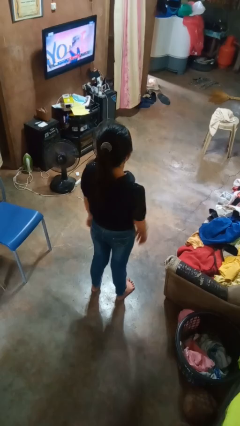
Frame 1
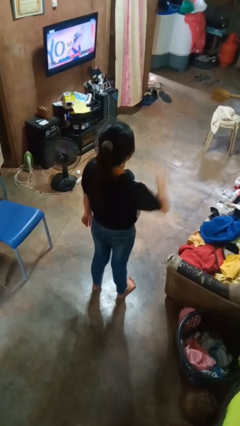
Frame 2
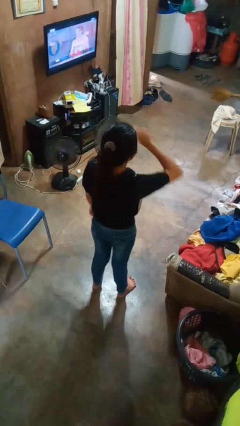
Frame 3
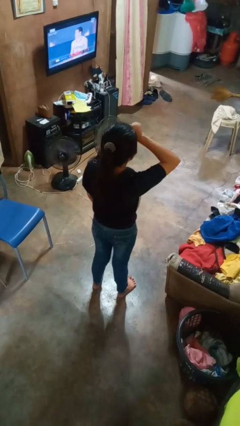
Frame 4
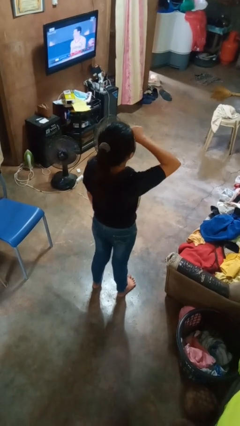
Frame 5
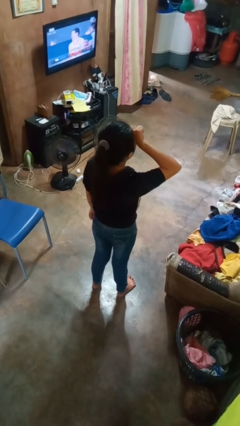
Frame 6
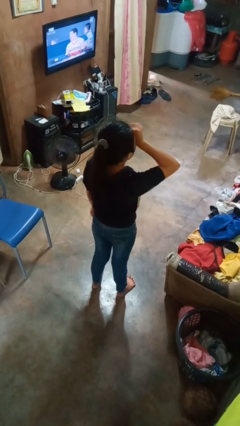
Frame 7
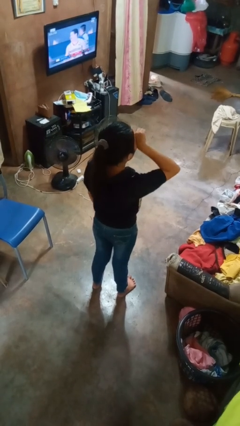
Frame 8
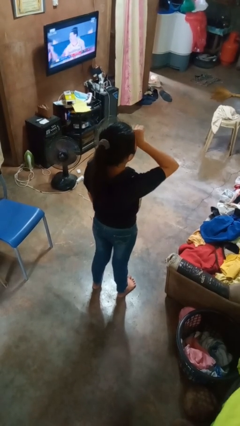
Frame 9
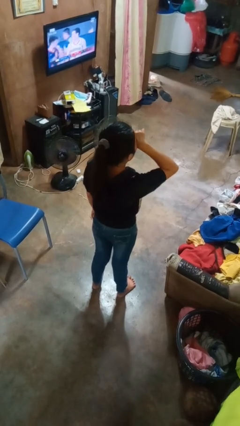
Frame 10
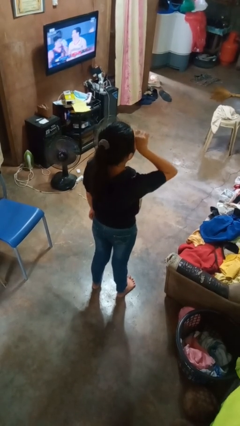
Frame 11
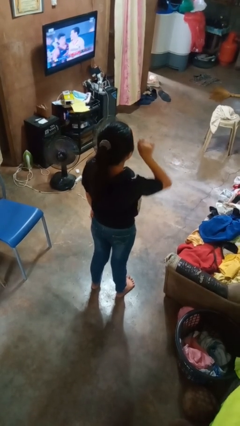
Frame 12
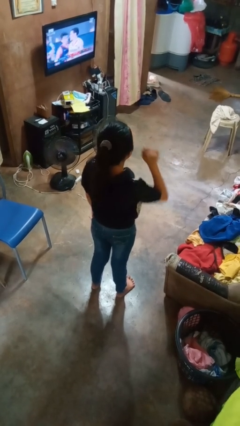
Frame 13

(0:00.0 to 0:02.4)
person rubs eyes

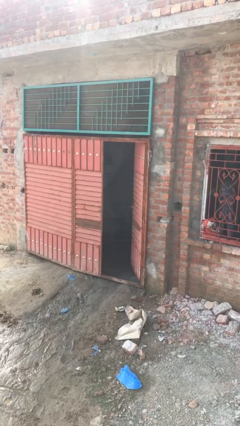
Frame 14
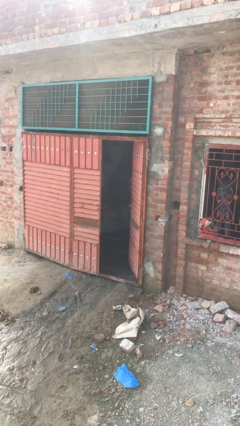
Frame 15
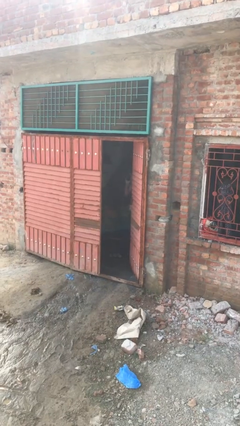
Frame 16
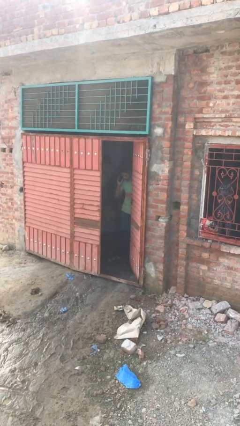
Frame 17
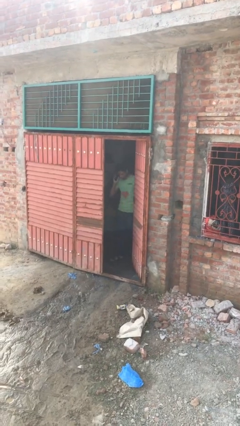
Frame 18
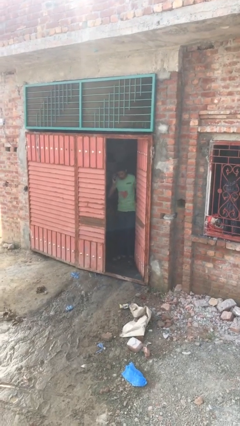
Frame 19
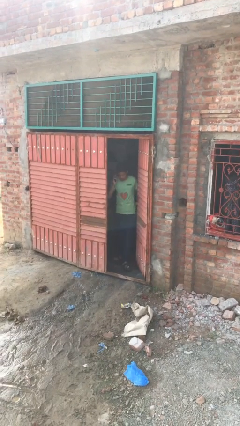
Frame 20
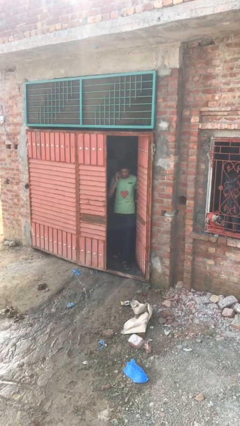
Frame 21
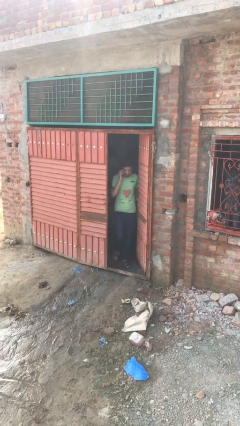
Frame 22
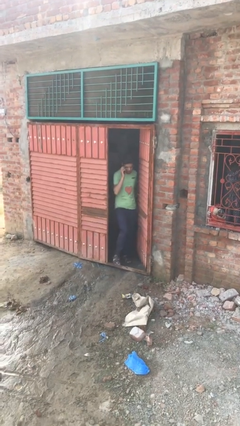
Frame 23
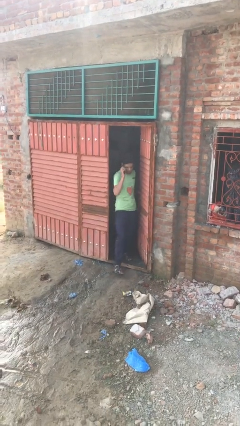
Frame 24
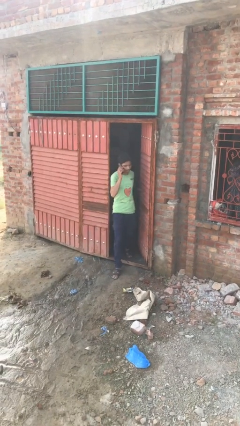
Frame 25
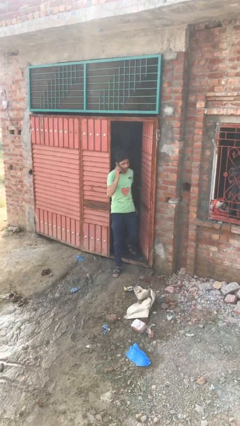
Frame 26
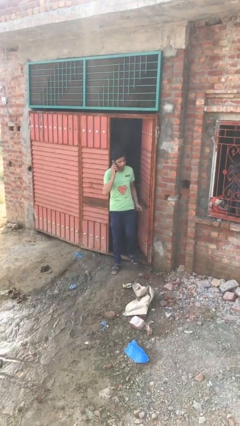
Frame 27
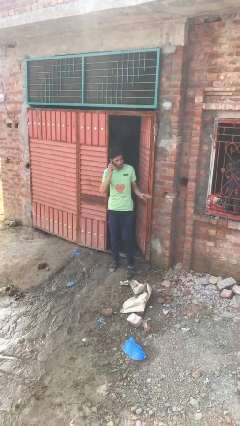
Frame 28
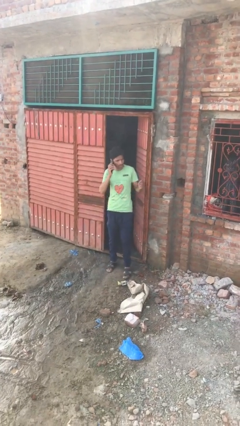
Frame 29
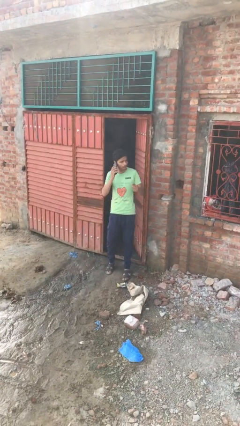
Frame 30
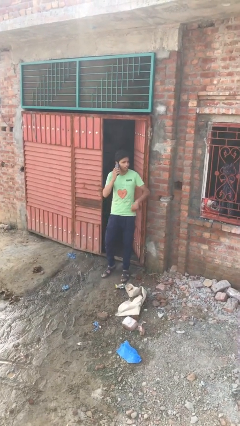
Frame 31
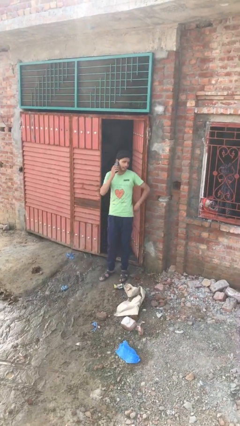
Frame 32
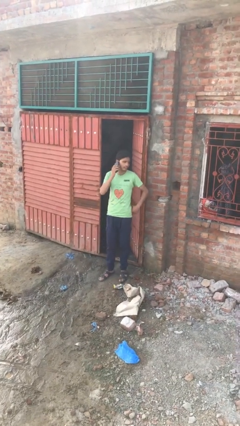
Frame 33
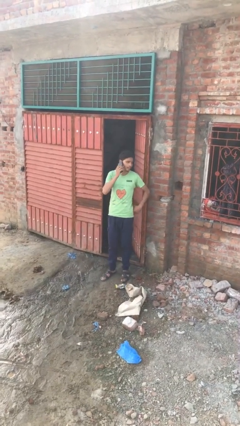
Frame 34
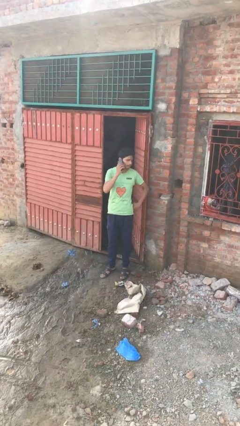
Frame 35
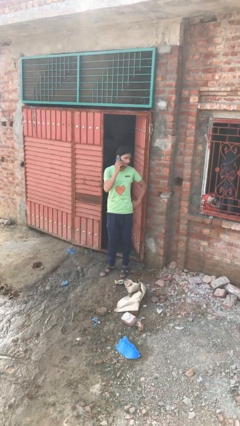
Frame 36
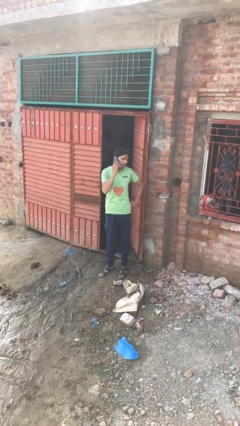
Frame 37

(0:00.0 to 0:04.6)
person enters scene through structure

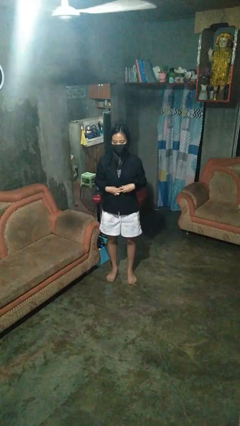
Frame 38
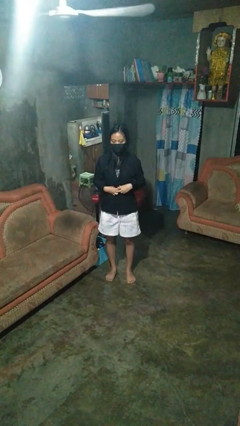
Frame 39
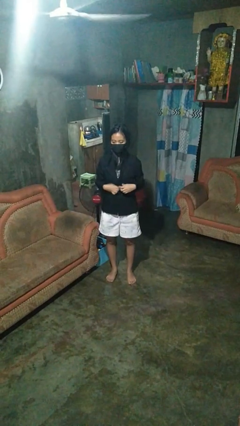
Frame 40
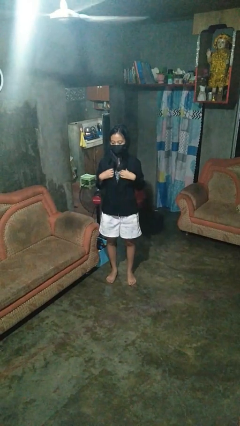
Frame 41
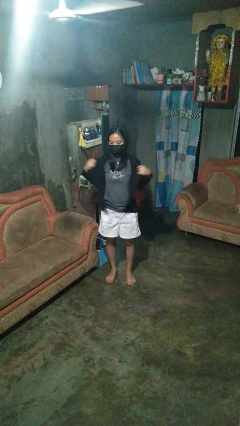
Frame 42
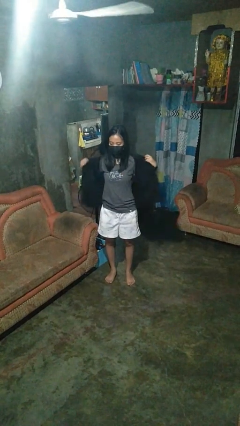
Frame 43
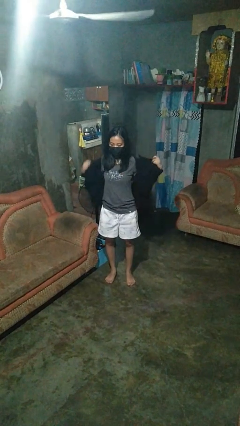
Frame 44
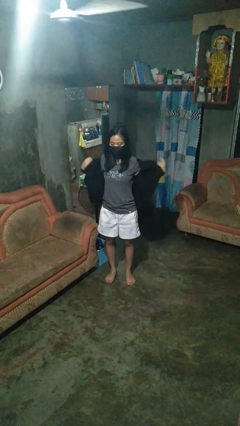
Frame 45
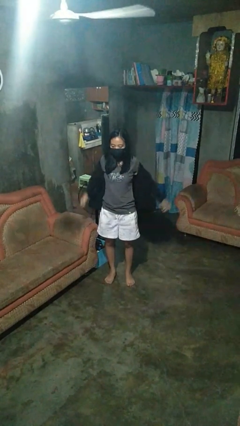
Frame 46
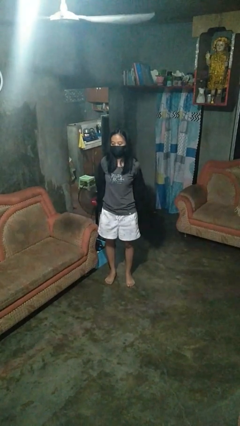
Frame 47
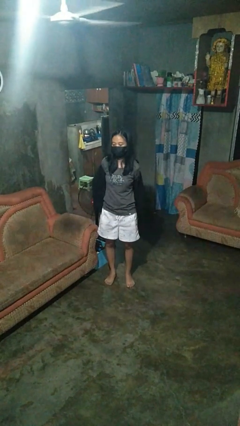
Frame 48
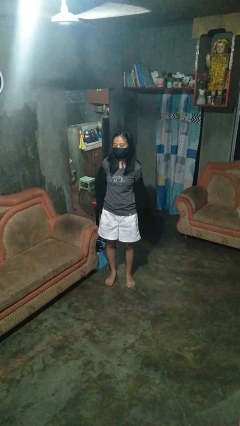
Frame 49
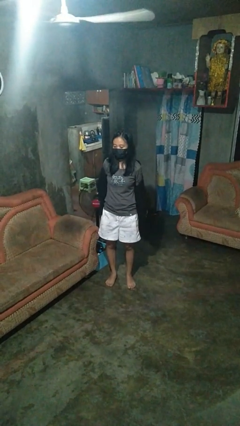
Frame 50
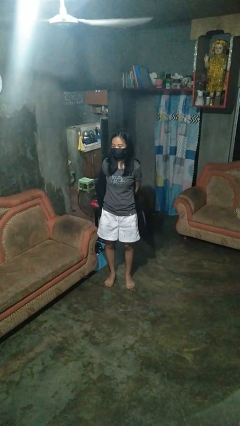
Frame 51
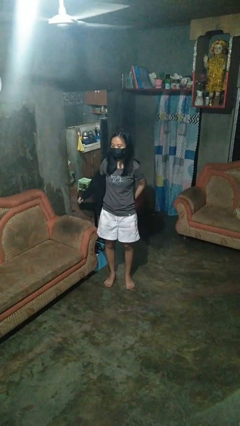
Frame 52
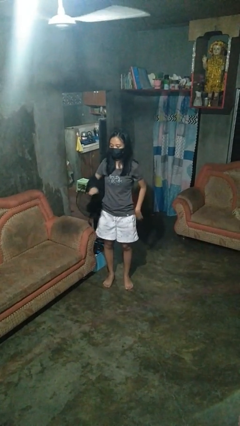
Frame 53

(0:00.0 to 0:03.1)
person takes off shirt

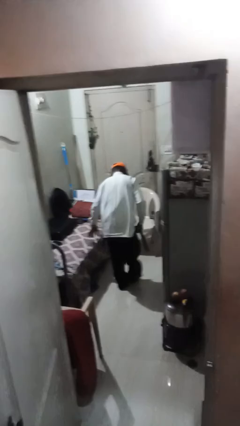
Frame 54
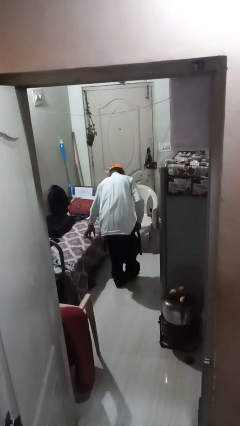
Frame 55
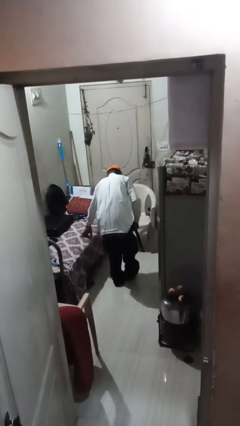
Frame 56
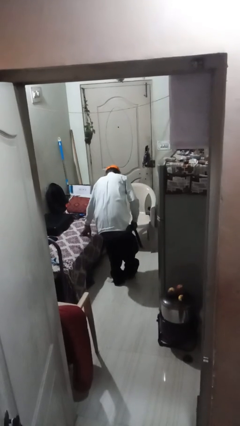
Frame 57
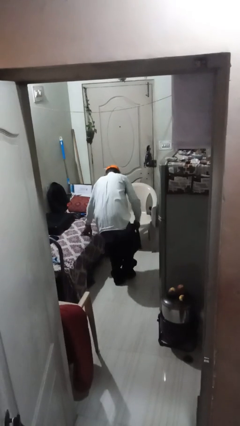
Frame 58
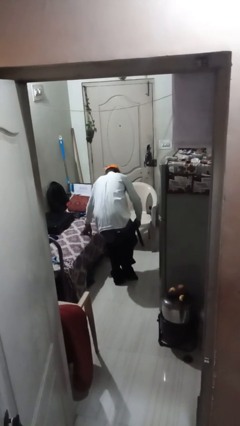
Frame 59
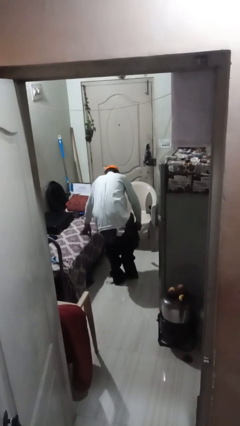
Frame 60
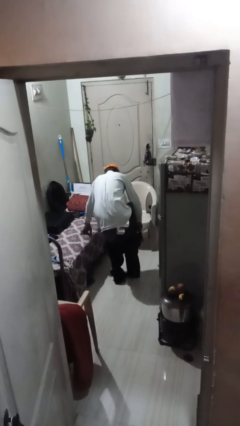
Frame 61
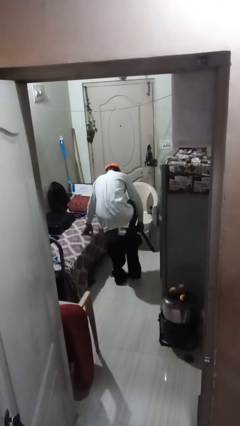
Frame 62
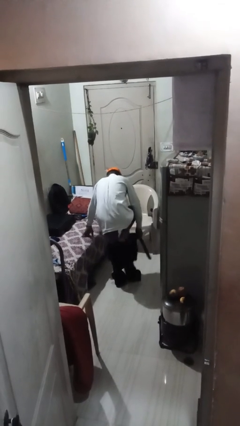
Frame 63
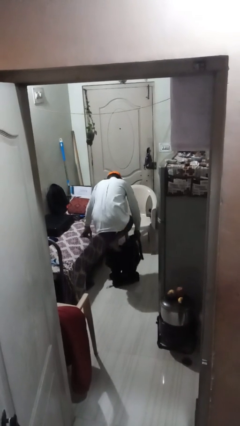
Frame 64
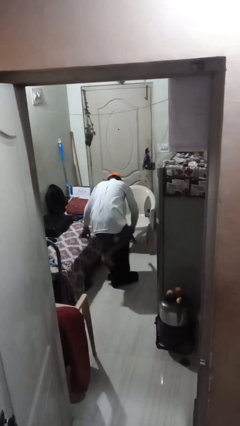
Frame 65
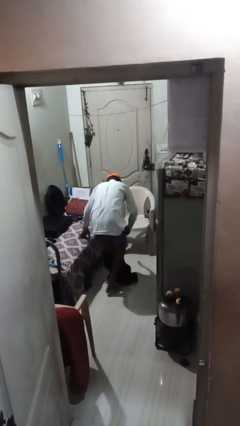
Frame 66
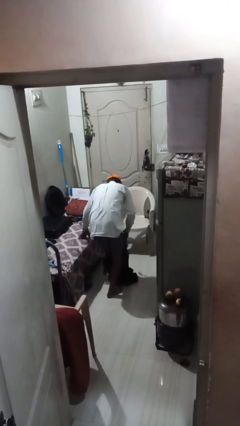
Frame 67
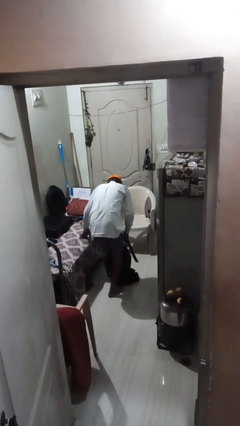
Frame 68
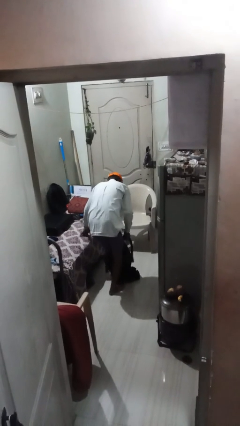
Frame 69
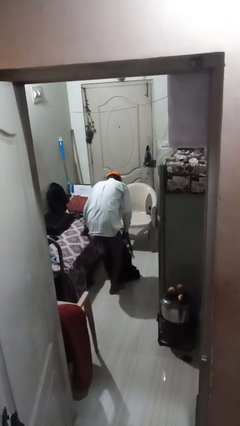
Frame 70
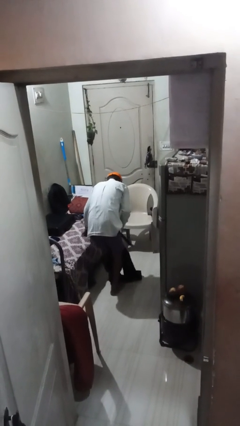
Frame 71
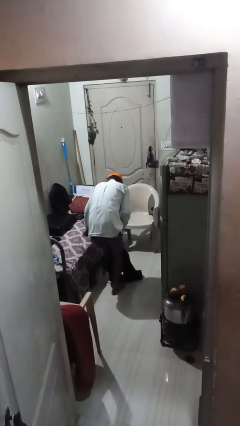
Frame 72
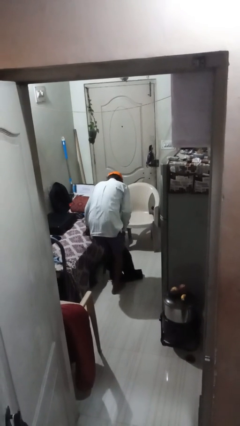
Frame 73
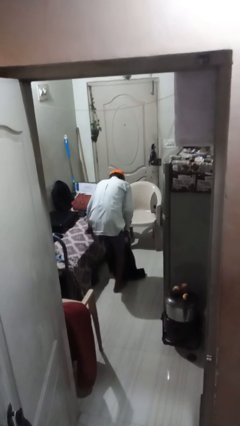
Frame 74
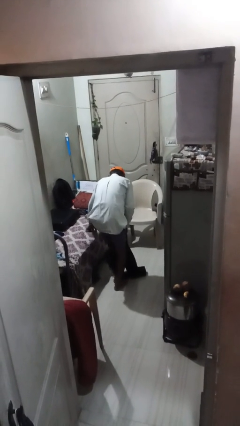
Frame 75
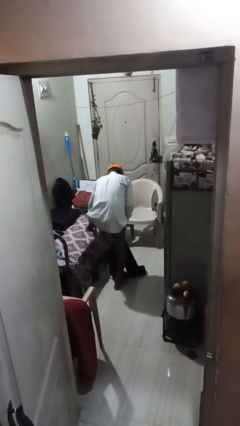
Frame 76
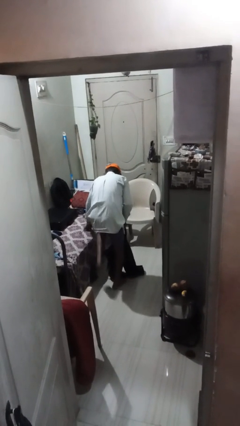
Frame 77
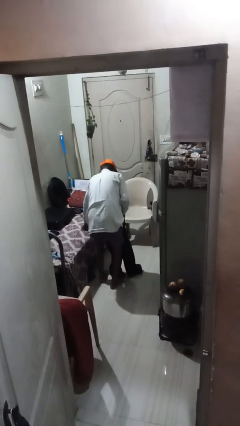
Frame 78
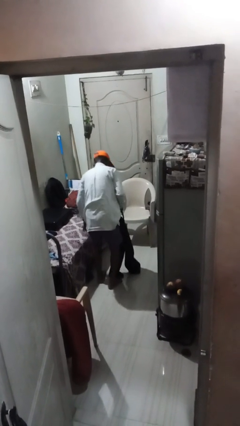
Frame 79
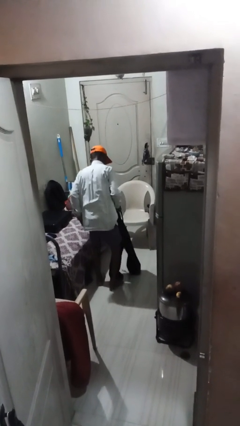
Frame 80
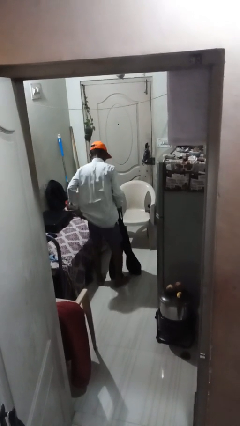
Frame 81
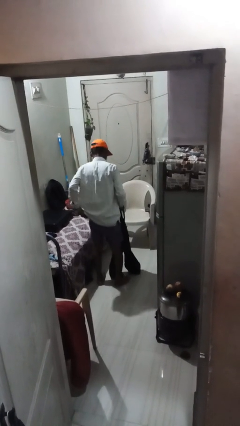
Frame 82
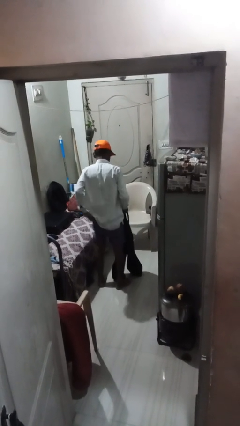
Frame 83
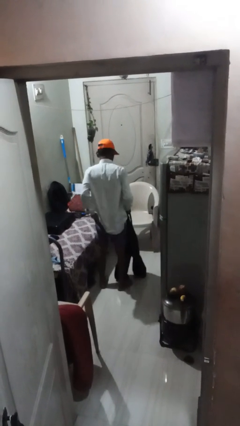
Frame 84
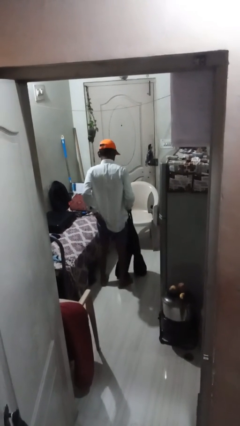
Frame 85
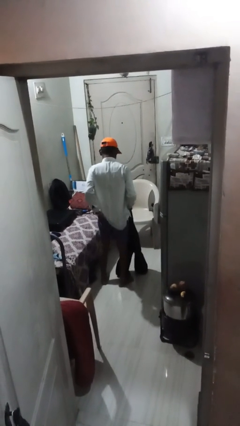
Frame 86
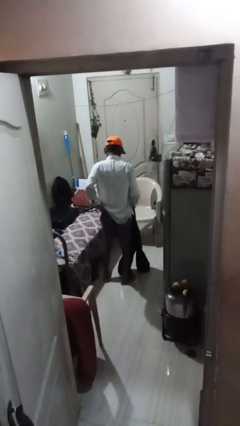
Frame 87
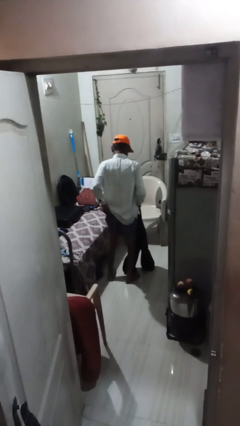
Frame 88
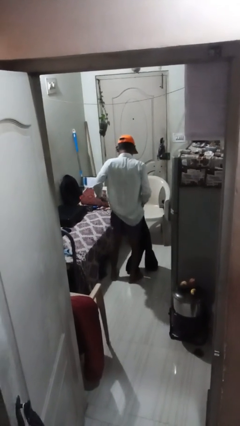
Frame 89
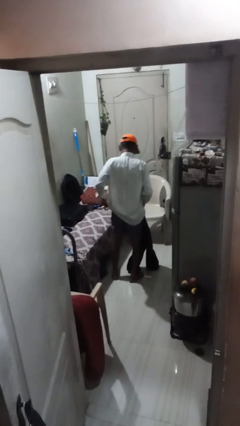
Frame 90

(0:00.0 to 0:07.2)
person takes off pants

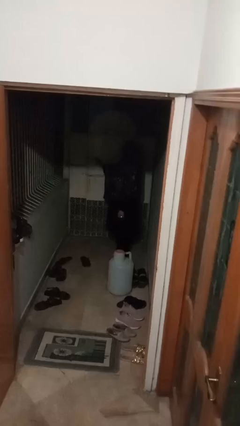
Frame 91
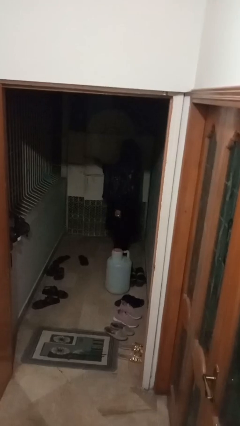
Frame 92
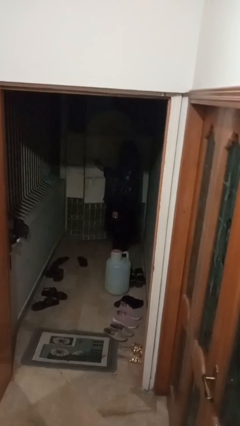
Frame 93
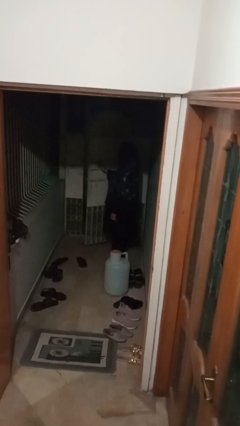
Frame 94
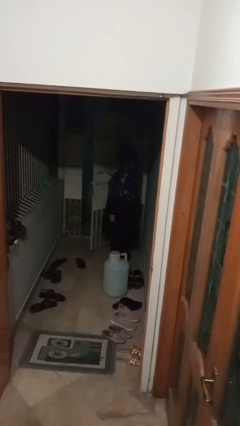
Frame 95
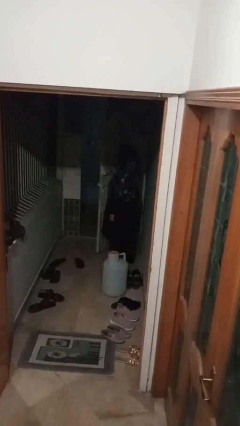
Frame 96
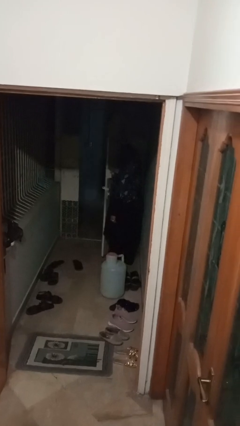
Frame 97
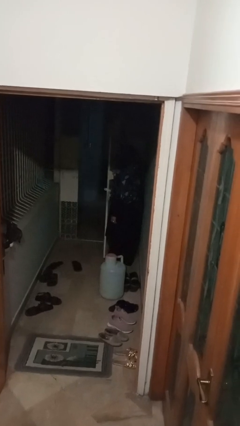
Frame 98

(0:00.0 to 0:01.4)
person opens gate
